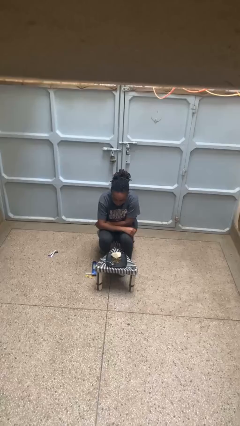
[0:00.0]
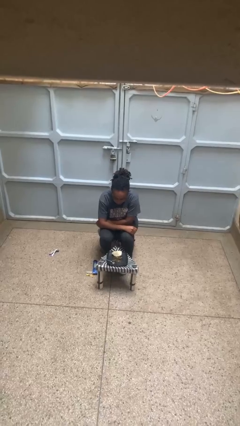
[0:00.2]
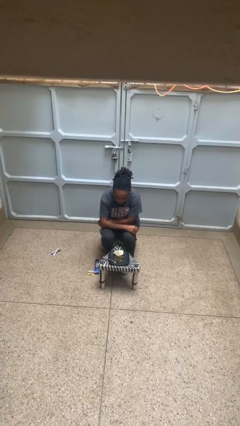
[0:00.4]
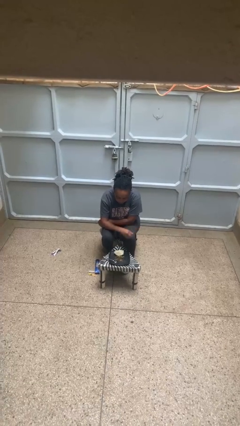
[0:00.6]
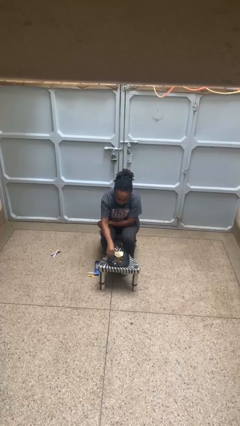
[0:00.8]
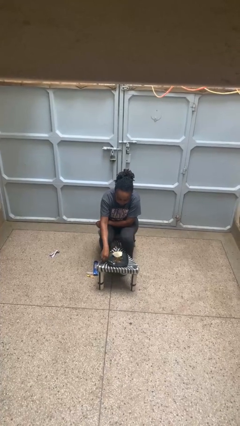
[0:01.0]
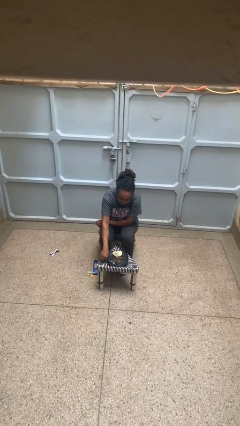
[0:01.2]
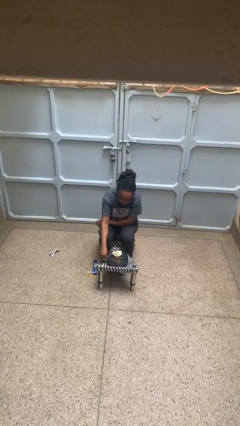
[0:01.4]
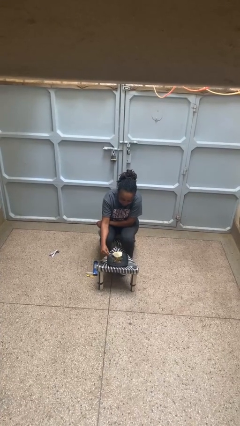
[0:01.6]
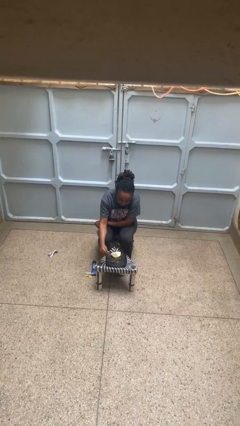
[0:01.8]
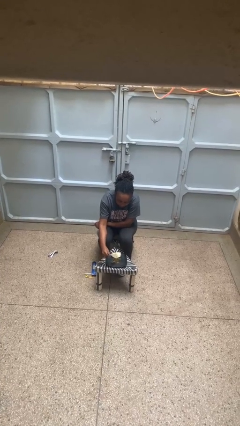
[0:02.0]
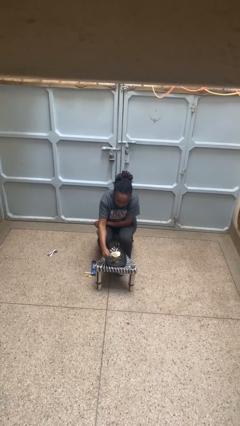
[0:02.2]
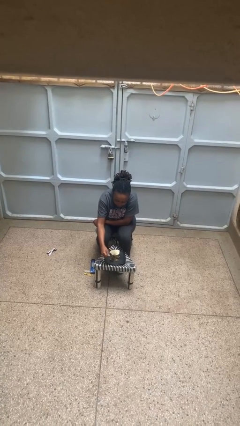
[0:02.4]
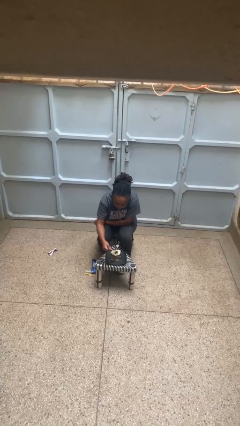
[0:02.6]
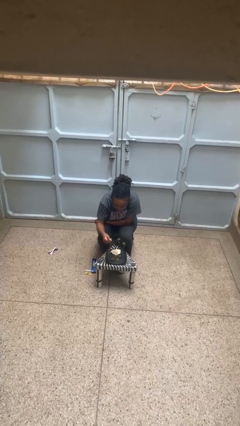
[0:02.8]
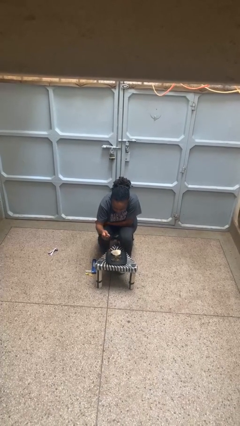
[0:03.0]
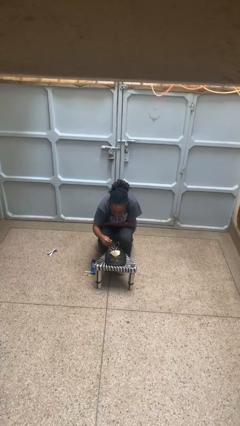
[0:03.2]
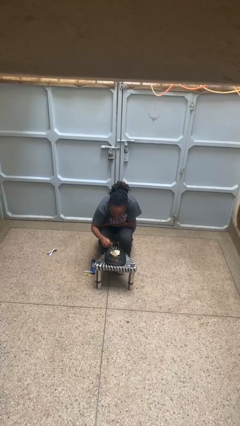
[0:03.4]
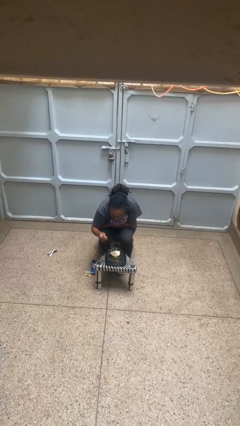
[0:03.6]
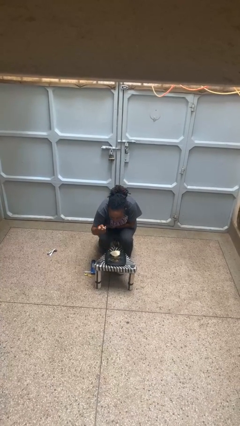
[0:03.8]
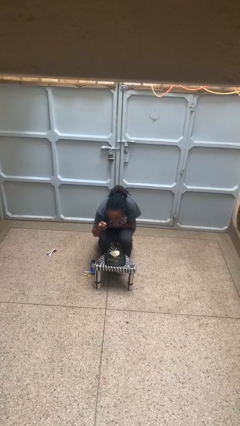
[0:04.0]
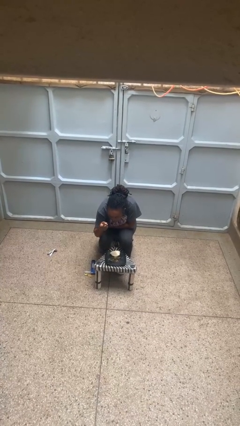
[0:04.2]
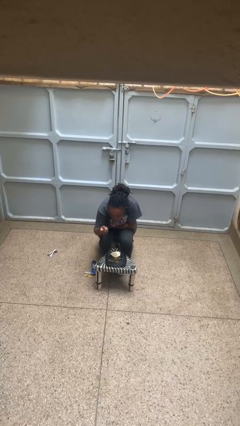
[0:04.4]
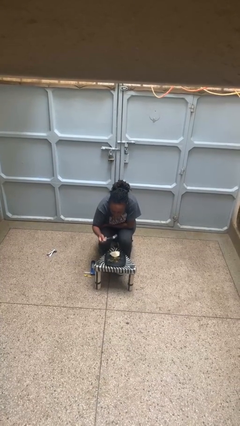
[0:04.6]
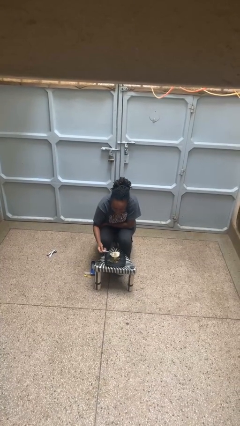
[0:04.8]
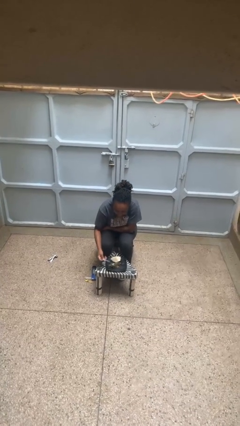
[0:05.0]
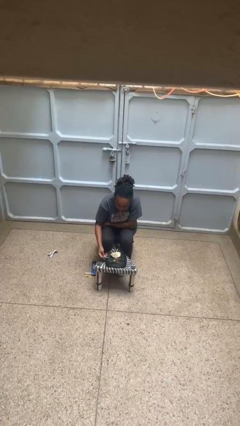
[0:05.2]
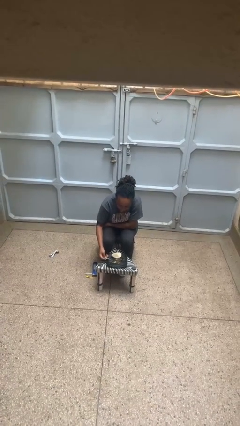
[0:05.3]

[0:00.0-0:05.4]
person eats with utensil

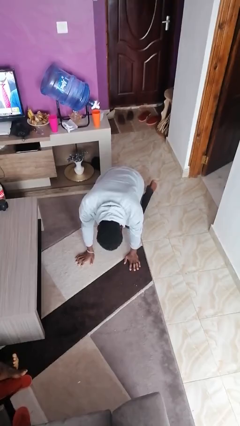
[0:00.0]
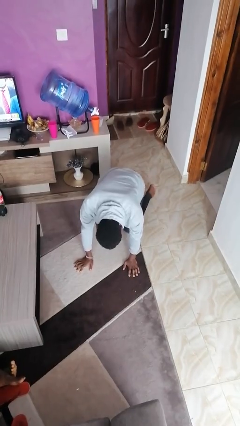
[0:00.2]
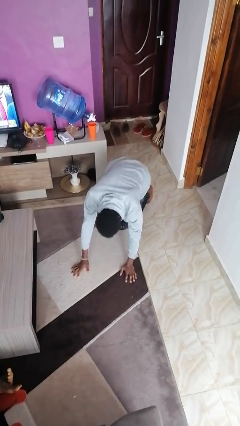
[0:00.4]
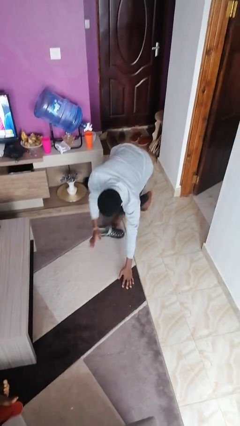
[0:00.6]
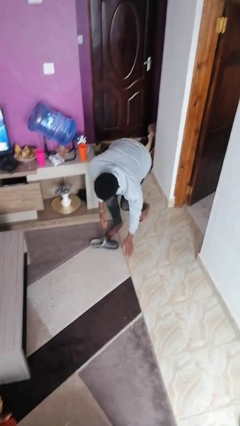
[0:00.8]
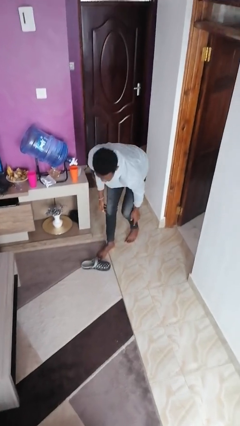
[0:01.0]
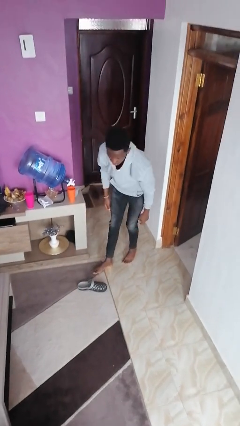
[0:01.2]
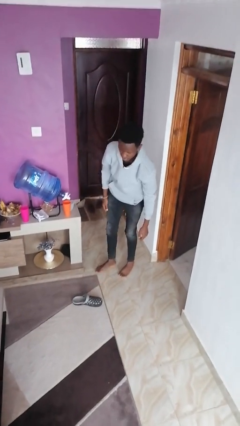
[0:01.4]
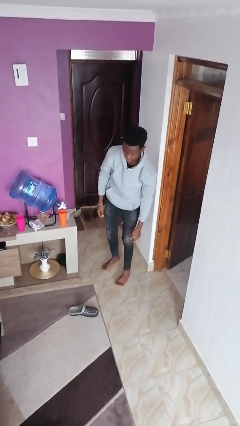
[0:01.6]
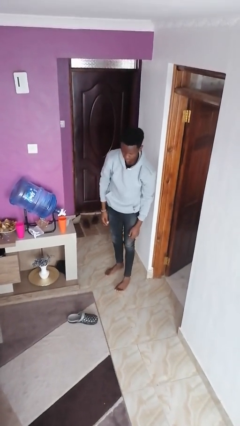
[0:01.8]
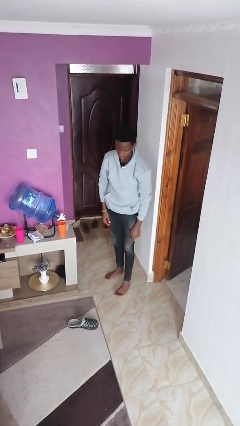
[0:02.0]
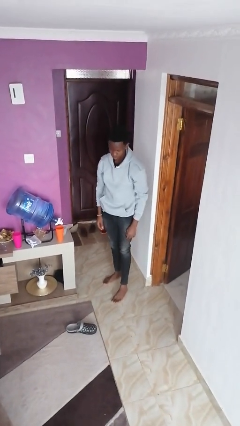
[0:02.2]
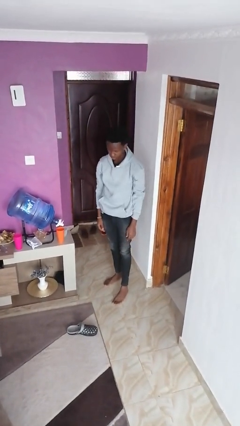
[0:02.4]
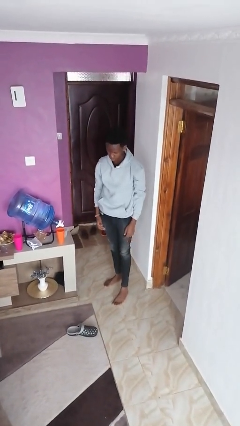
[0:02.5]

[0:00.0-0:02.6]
person stands up from floor

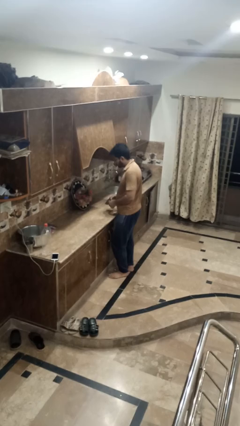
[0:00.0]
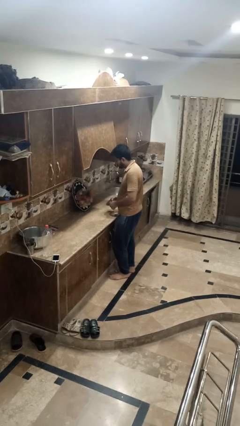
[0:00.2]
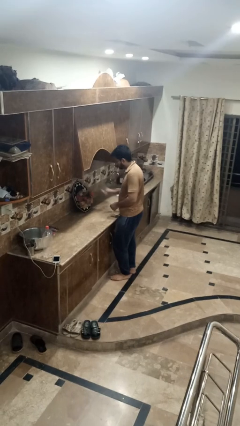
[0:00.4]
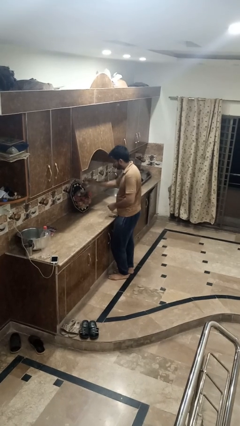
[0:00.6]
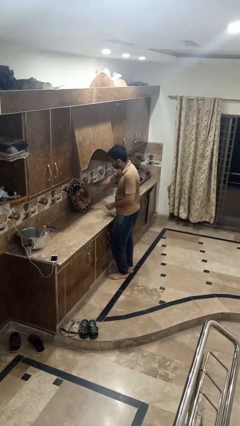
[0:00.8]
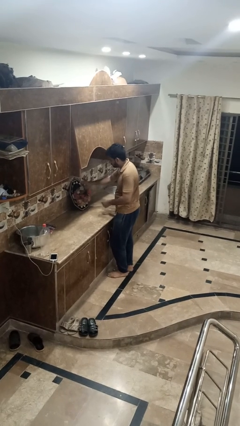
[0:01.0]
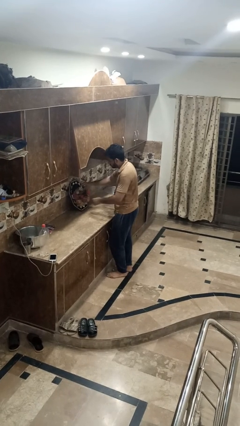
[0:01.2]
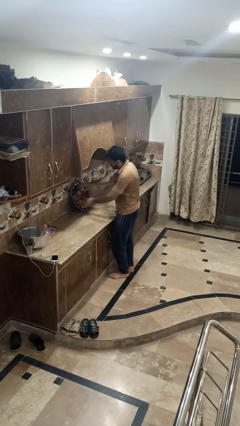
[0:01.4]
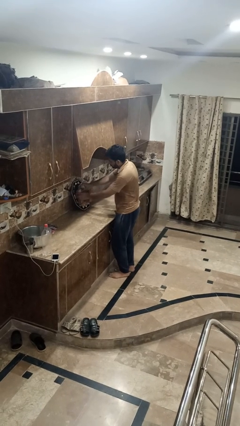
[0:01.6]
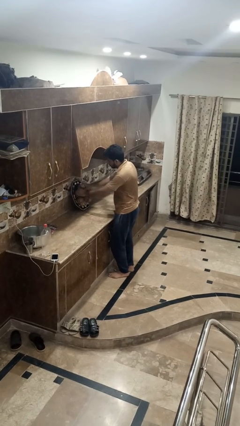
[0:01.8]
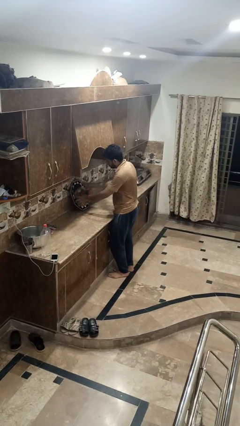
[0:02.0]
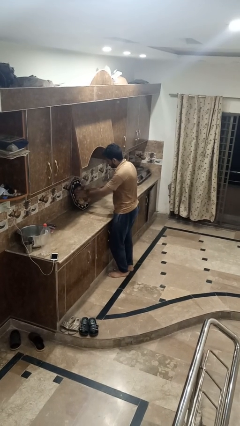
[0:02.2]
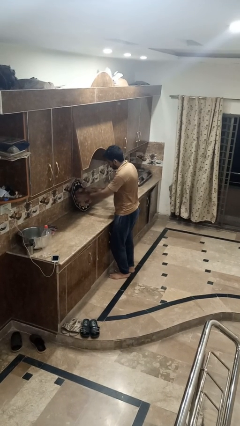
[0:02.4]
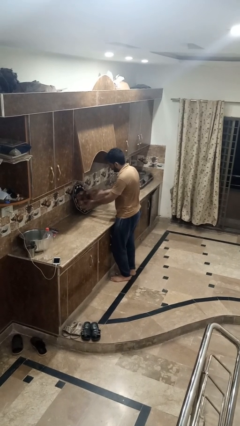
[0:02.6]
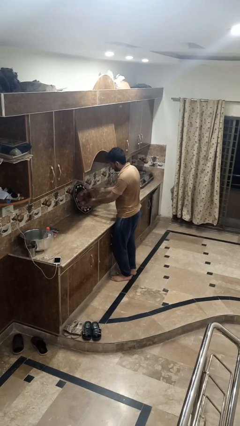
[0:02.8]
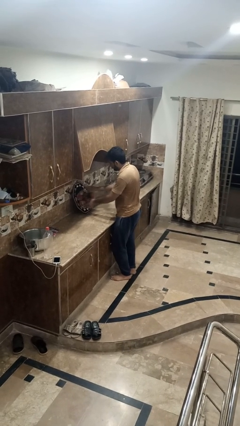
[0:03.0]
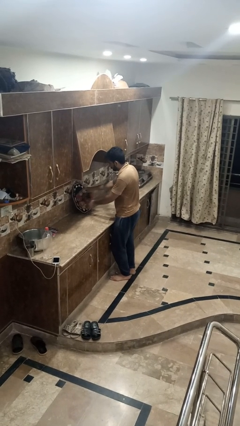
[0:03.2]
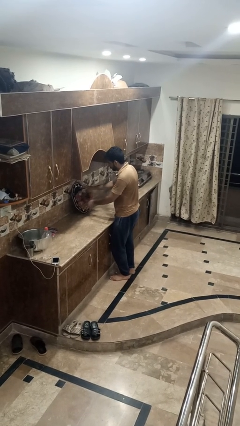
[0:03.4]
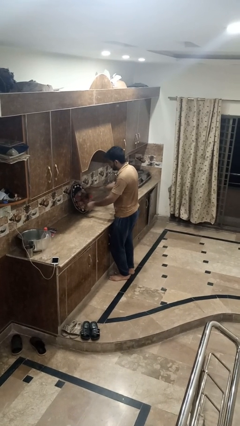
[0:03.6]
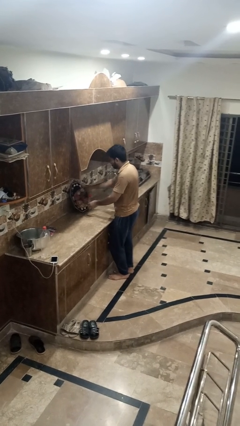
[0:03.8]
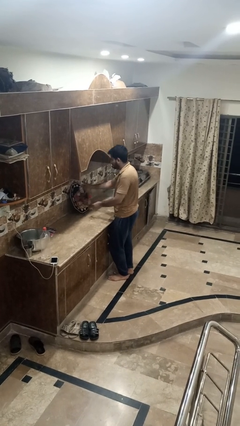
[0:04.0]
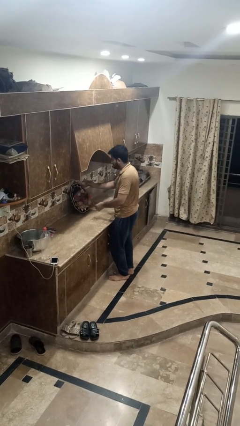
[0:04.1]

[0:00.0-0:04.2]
person arranges flowers in vase

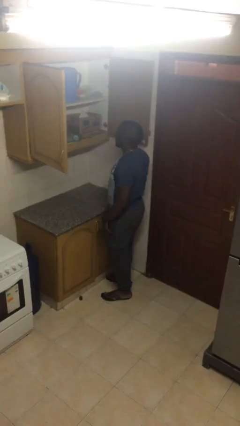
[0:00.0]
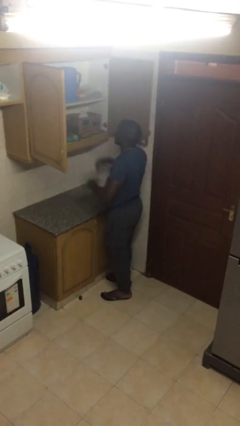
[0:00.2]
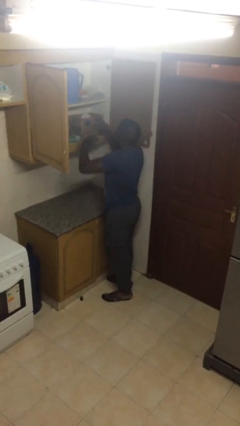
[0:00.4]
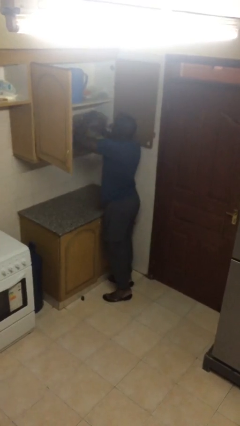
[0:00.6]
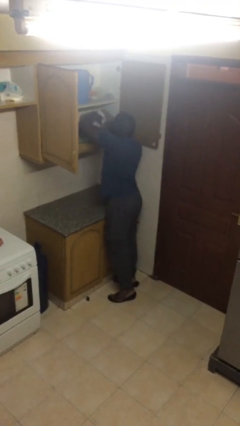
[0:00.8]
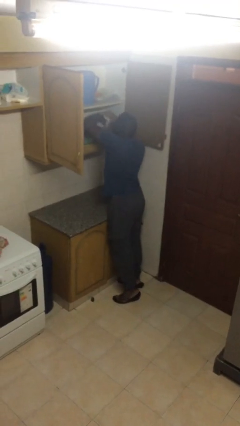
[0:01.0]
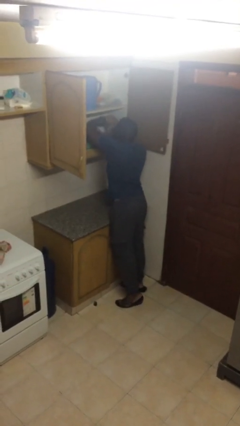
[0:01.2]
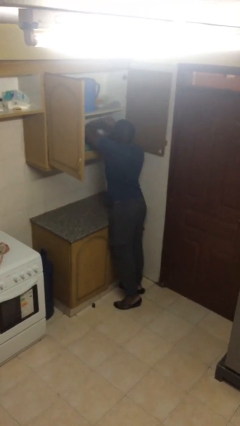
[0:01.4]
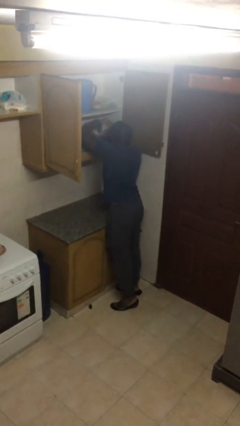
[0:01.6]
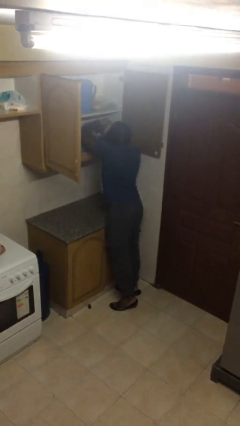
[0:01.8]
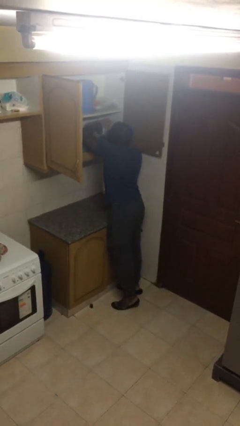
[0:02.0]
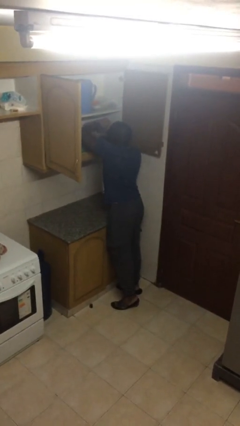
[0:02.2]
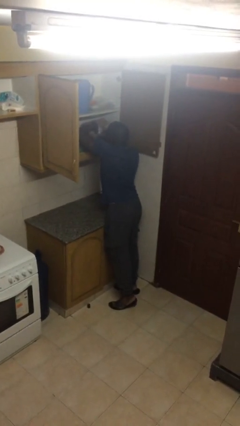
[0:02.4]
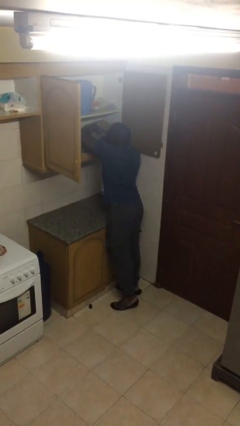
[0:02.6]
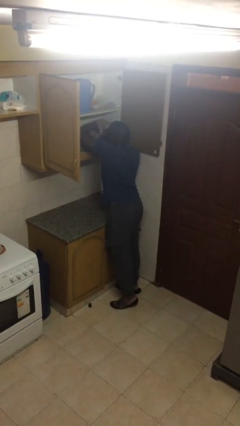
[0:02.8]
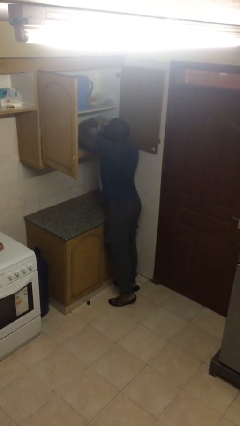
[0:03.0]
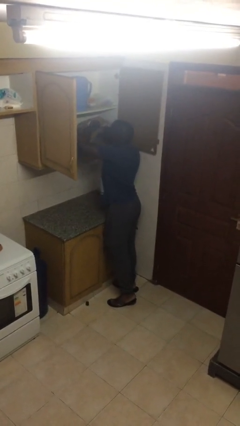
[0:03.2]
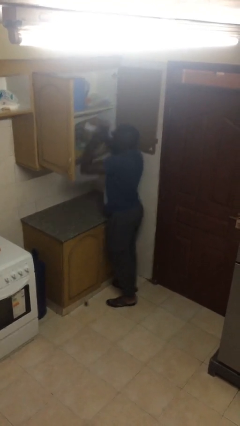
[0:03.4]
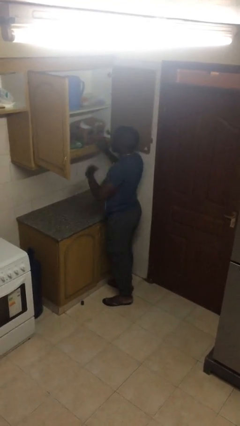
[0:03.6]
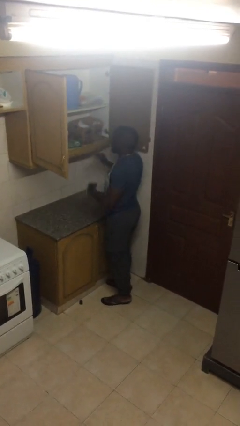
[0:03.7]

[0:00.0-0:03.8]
person searches in cabinet

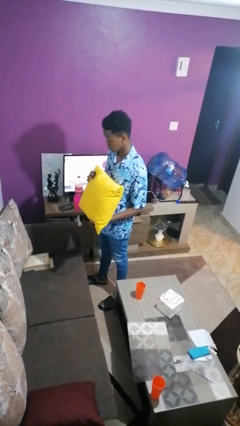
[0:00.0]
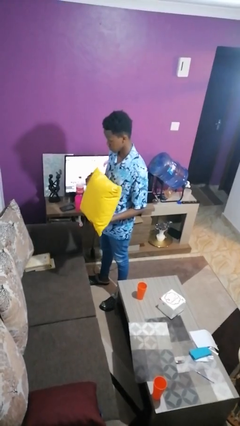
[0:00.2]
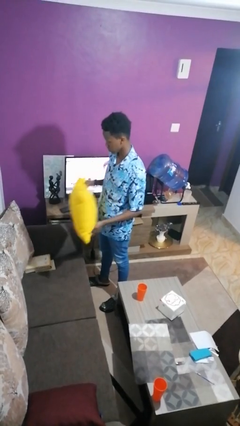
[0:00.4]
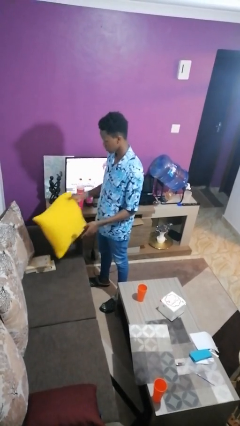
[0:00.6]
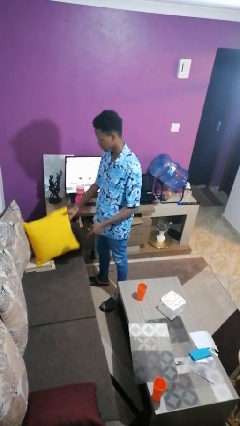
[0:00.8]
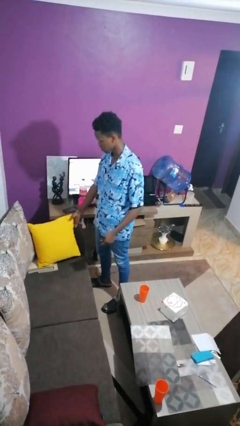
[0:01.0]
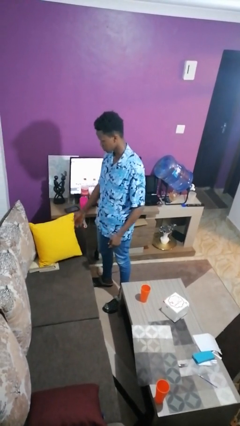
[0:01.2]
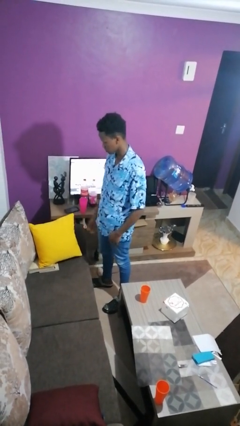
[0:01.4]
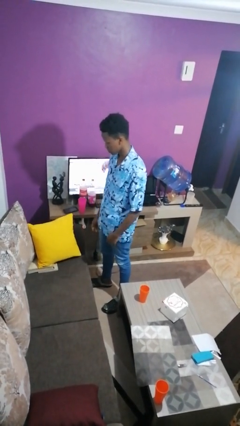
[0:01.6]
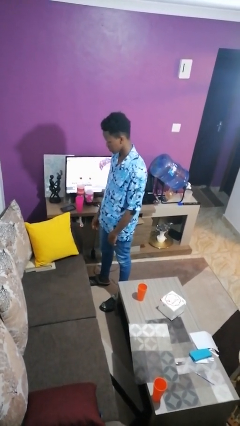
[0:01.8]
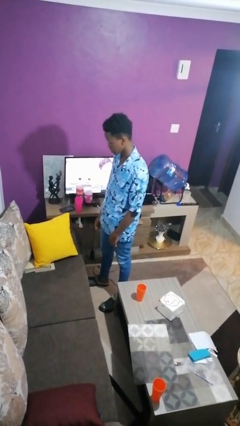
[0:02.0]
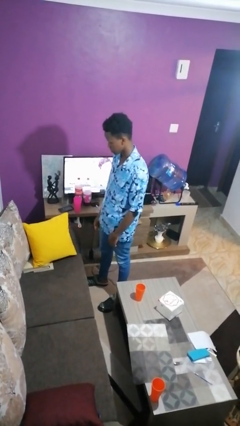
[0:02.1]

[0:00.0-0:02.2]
person puts down object on couch
